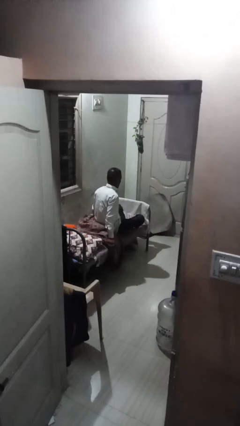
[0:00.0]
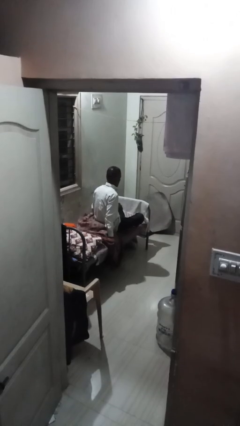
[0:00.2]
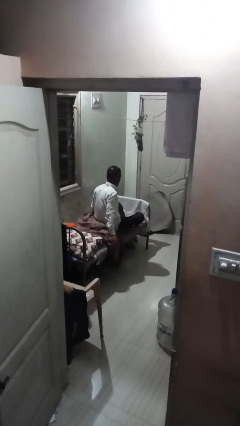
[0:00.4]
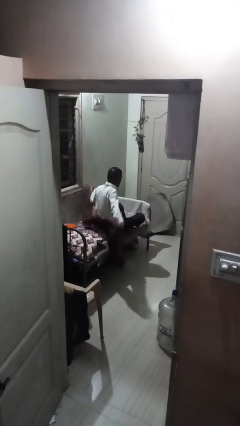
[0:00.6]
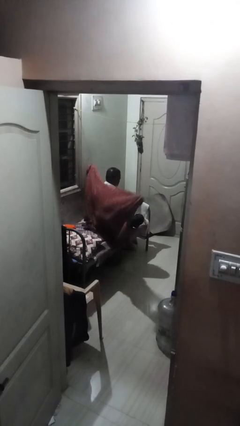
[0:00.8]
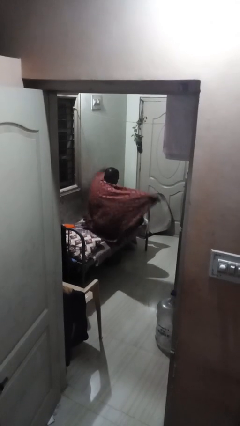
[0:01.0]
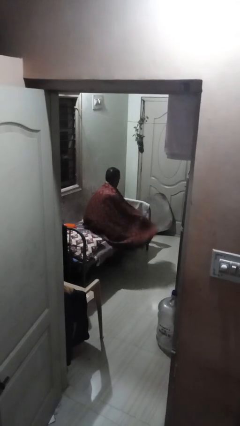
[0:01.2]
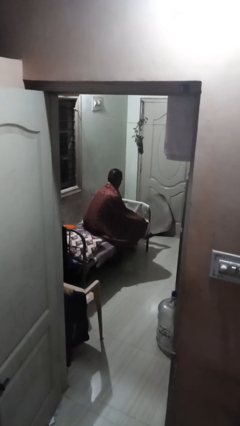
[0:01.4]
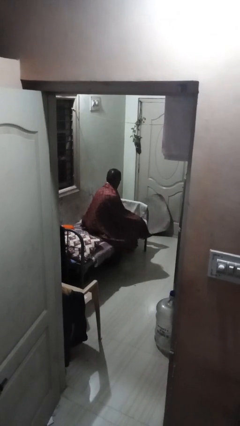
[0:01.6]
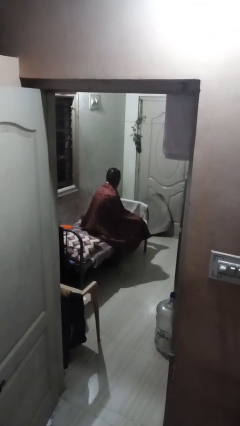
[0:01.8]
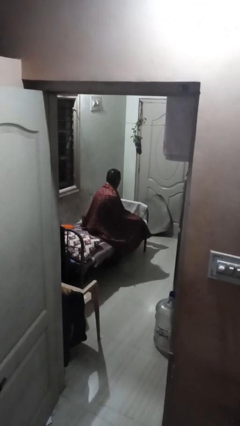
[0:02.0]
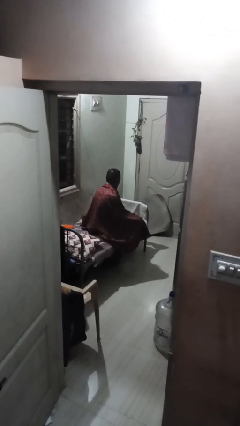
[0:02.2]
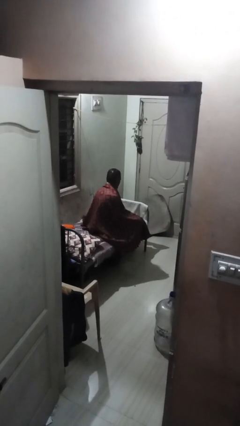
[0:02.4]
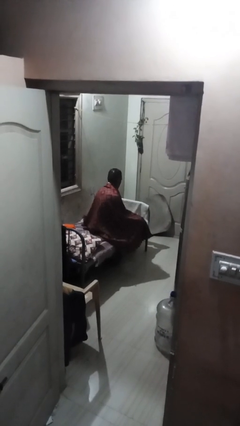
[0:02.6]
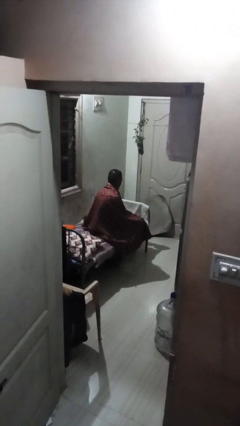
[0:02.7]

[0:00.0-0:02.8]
person covers with blanket

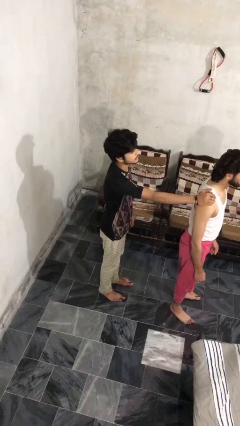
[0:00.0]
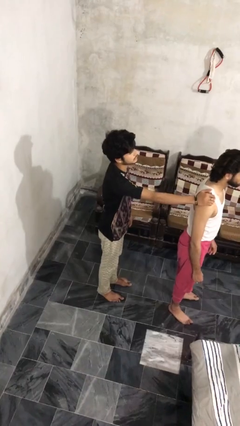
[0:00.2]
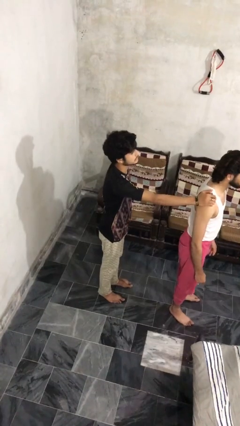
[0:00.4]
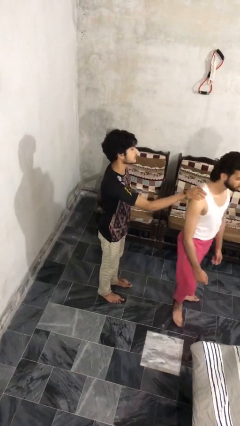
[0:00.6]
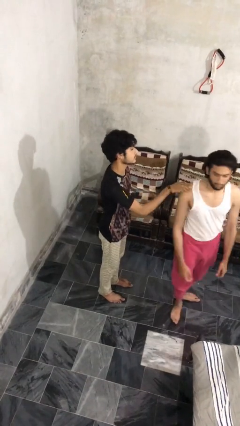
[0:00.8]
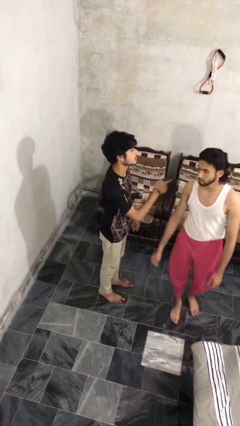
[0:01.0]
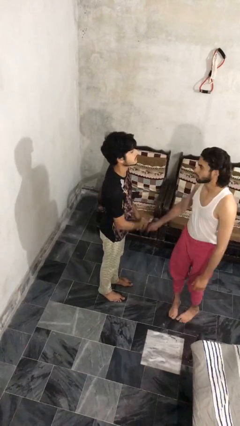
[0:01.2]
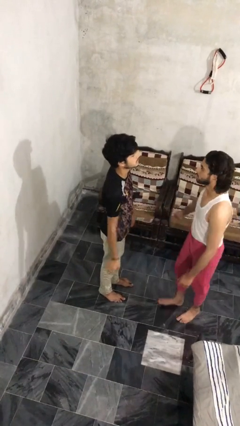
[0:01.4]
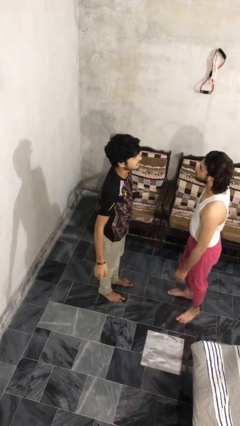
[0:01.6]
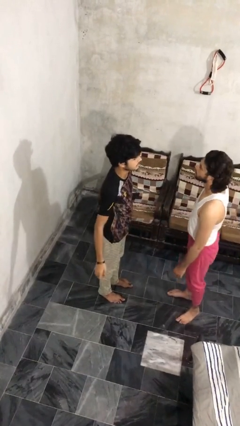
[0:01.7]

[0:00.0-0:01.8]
person spins person around

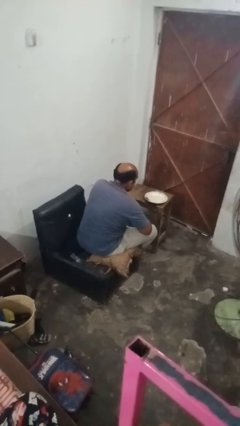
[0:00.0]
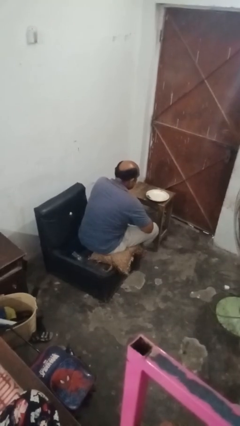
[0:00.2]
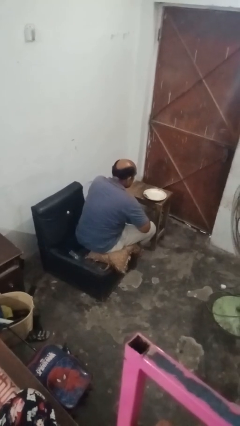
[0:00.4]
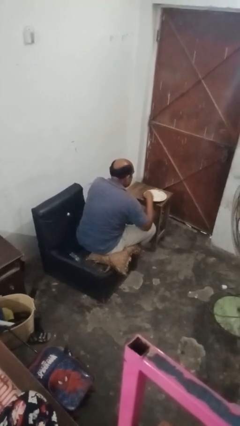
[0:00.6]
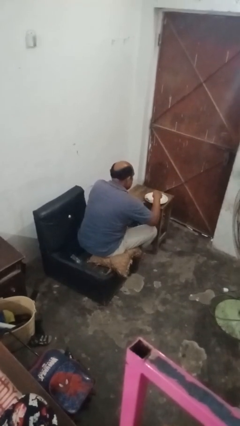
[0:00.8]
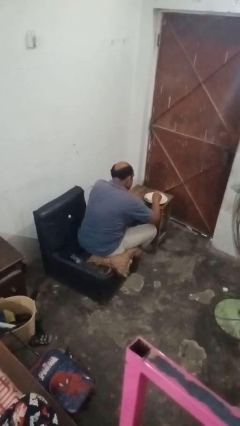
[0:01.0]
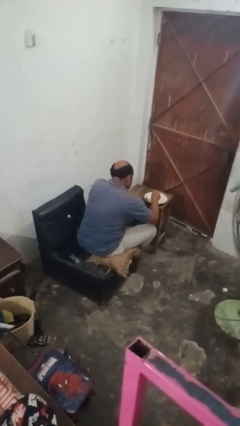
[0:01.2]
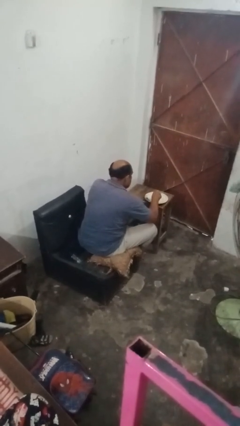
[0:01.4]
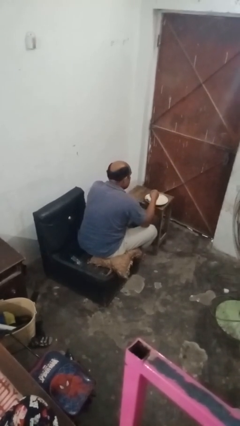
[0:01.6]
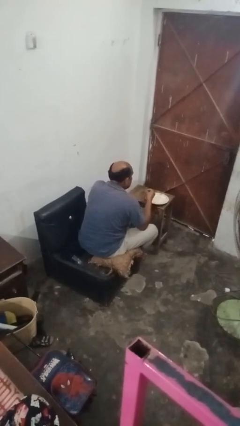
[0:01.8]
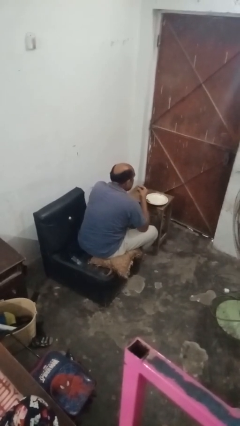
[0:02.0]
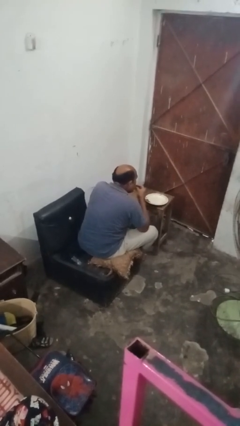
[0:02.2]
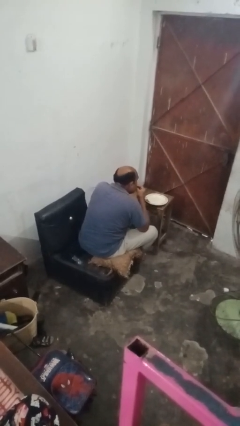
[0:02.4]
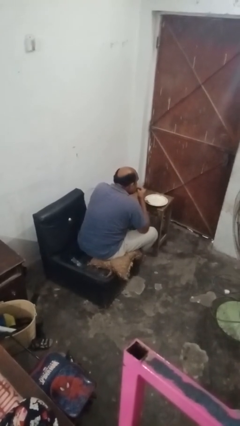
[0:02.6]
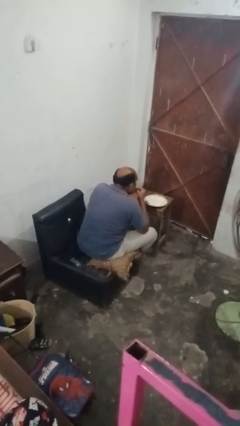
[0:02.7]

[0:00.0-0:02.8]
person eats with hands

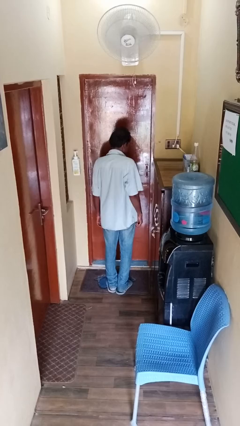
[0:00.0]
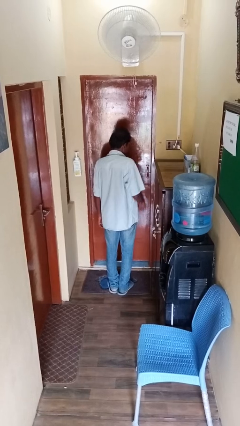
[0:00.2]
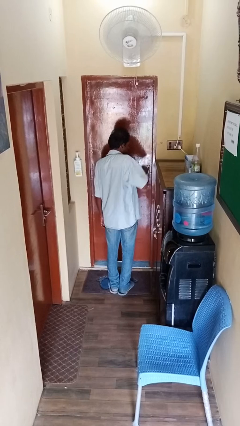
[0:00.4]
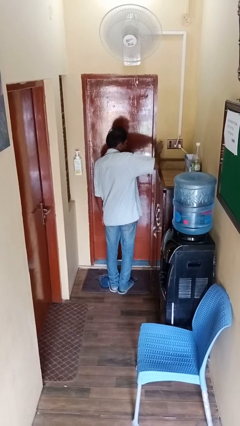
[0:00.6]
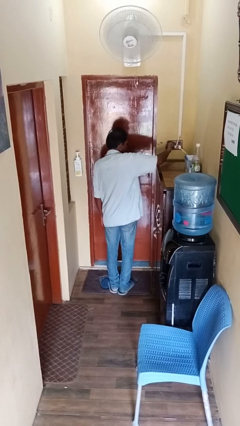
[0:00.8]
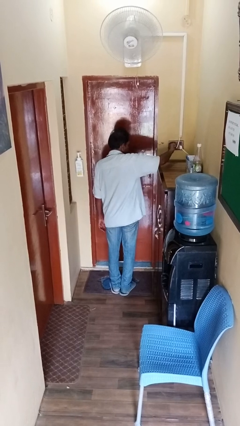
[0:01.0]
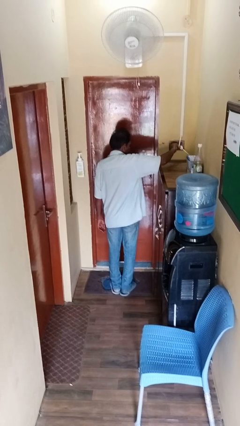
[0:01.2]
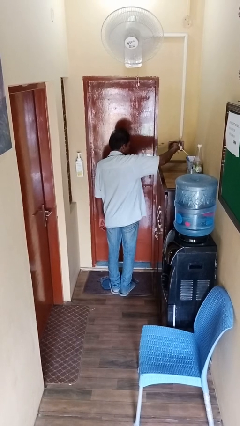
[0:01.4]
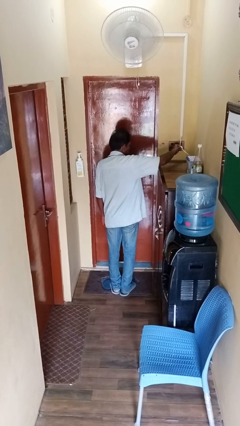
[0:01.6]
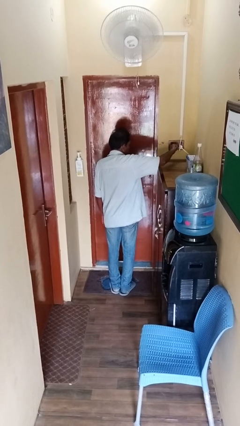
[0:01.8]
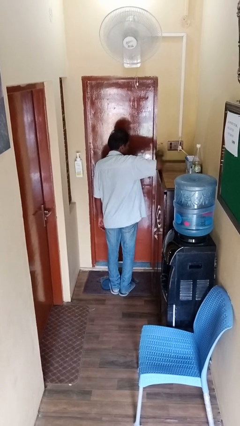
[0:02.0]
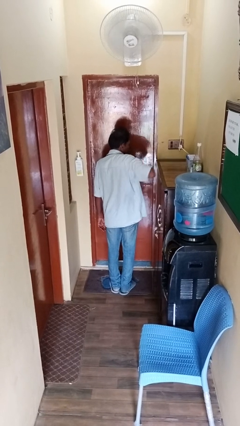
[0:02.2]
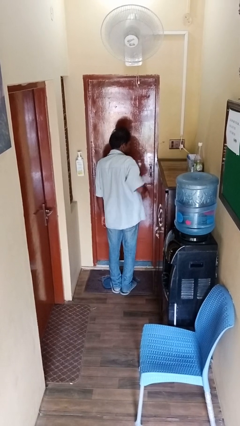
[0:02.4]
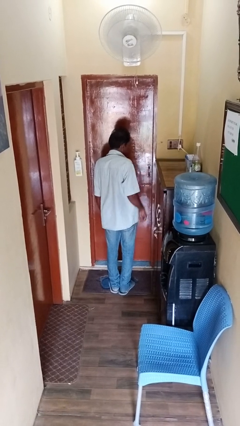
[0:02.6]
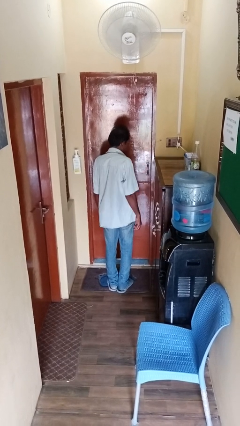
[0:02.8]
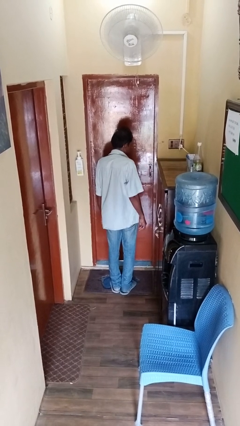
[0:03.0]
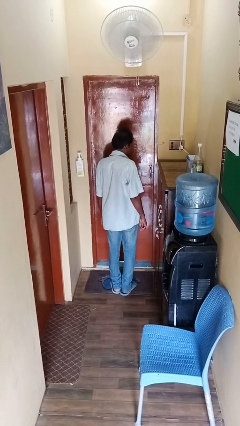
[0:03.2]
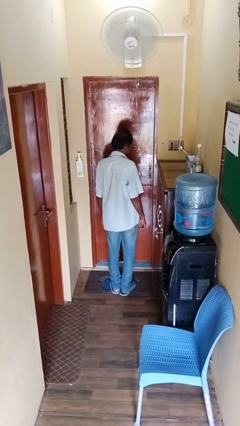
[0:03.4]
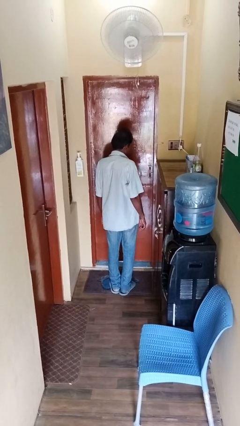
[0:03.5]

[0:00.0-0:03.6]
person turns off fan

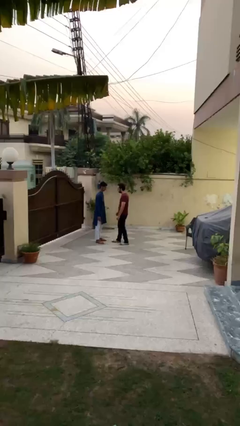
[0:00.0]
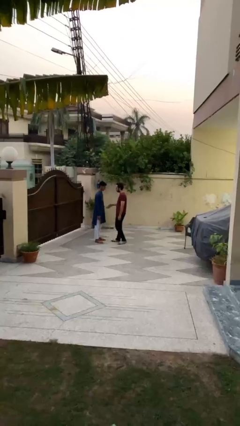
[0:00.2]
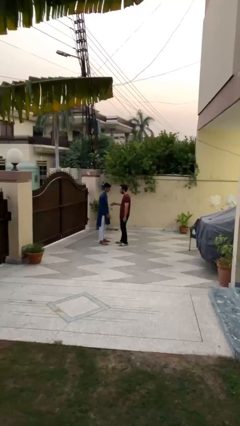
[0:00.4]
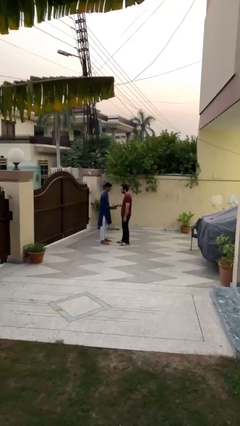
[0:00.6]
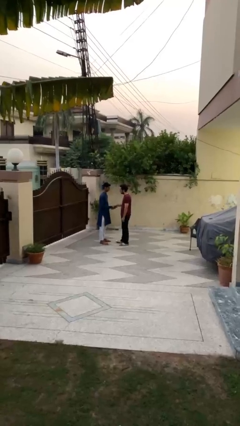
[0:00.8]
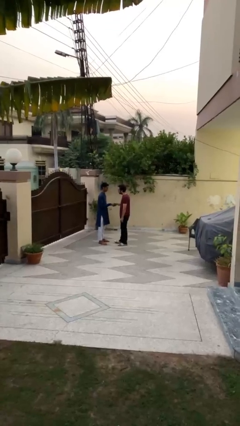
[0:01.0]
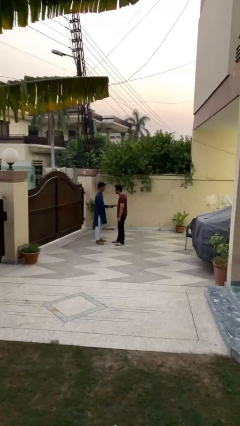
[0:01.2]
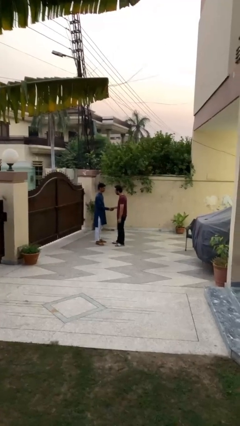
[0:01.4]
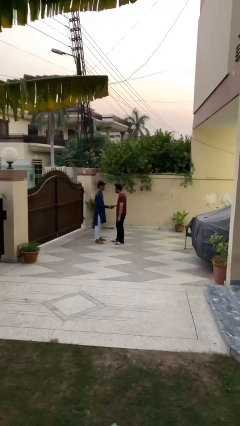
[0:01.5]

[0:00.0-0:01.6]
person shakes hand

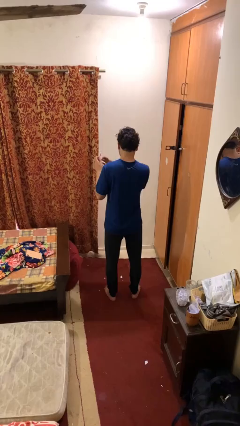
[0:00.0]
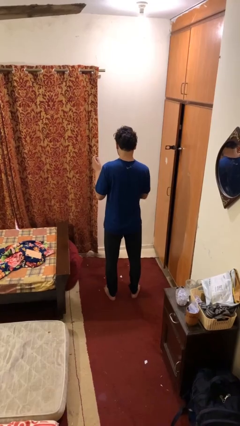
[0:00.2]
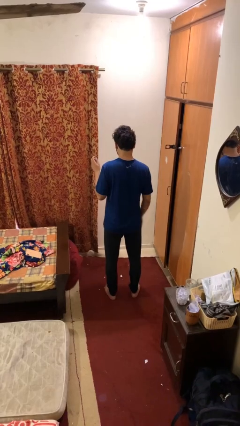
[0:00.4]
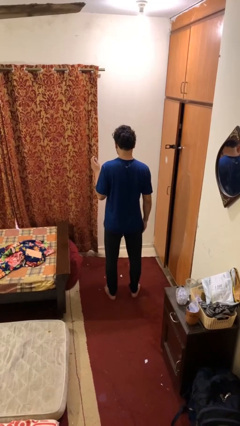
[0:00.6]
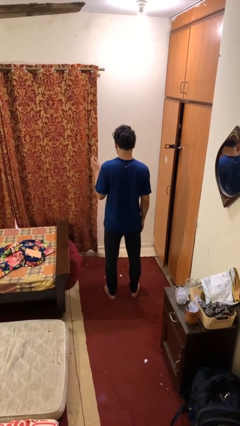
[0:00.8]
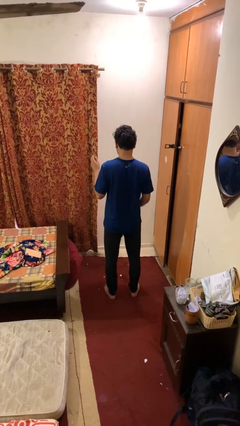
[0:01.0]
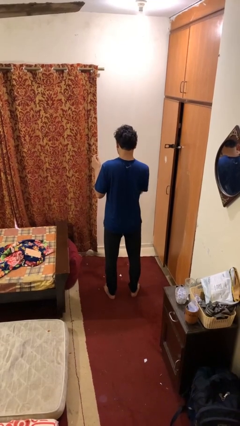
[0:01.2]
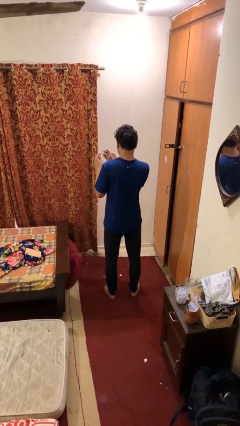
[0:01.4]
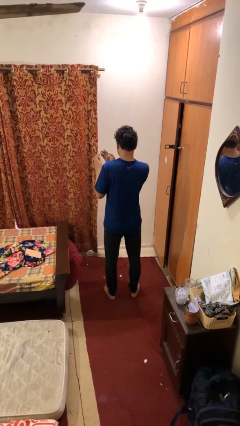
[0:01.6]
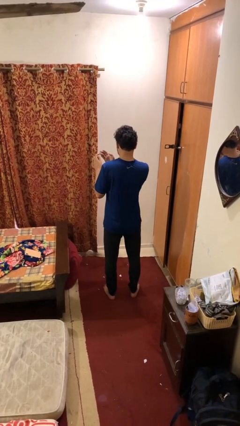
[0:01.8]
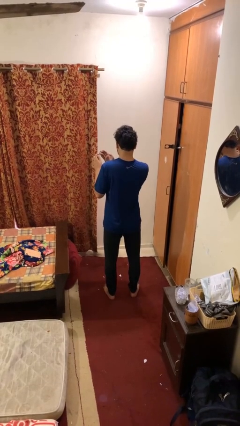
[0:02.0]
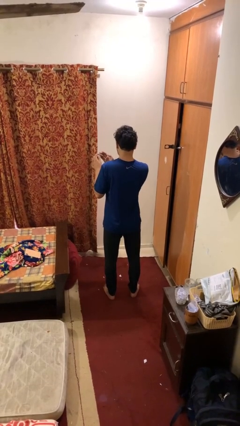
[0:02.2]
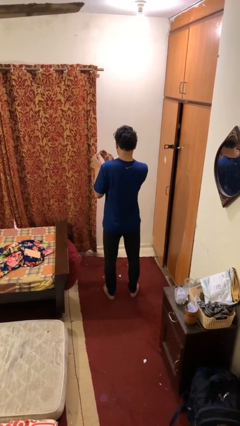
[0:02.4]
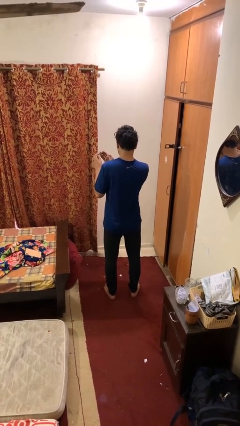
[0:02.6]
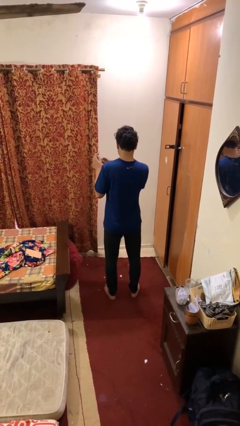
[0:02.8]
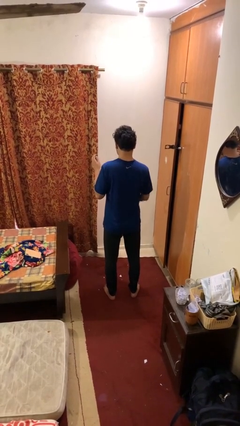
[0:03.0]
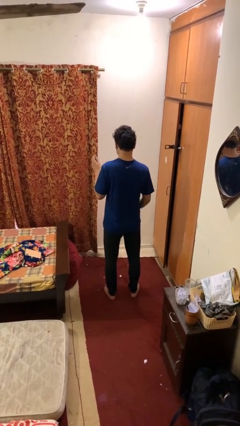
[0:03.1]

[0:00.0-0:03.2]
person files fingernails

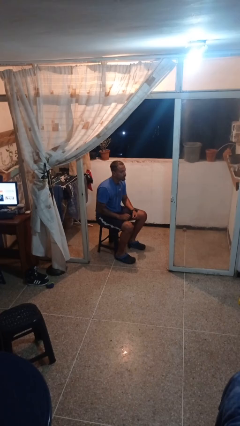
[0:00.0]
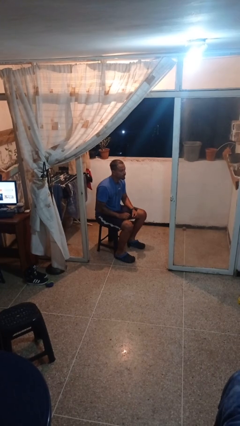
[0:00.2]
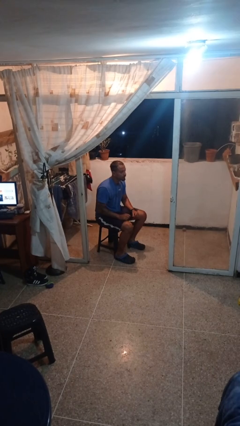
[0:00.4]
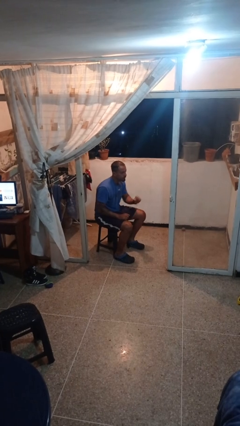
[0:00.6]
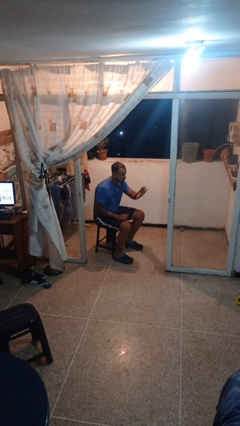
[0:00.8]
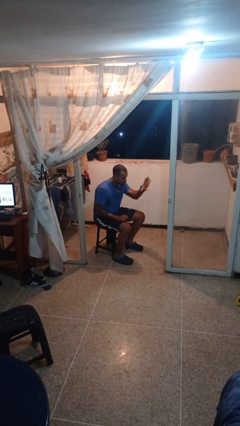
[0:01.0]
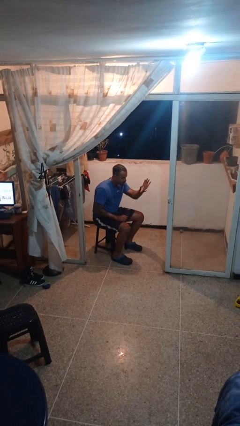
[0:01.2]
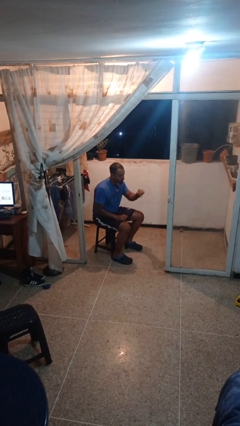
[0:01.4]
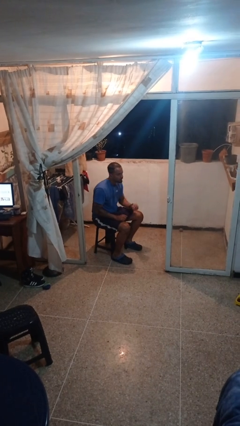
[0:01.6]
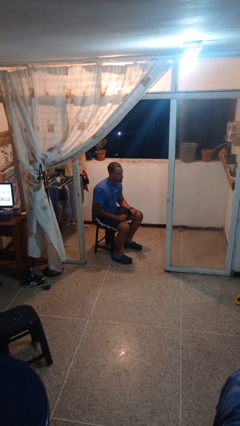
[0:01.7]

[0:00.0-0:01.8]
person gestures zoom in
